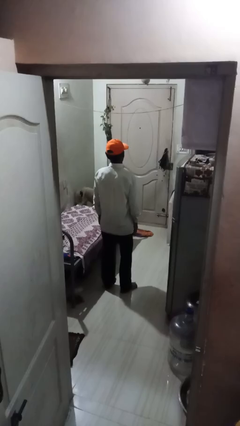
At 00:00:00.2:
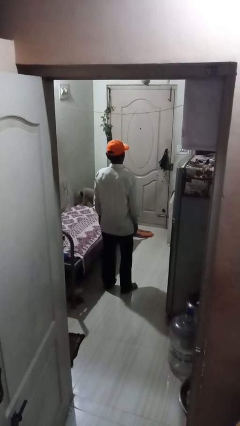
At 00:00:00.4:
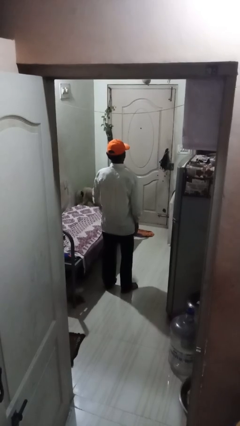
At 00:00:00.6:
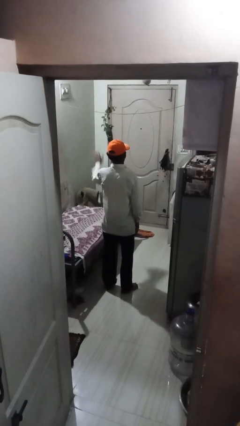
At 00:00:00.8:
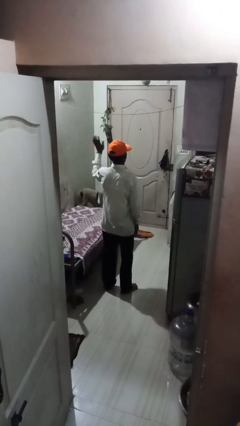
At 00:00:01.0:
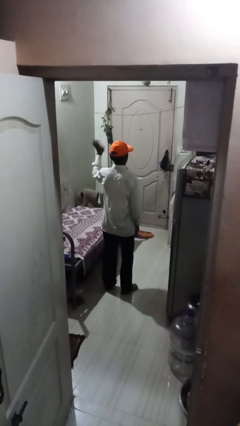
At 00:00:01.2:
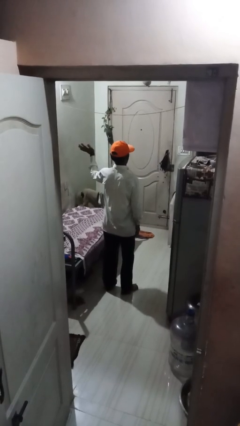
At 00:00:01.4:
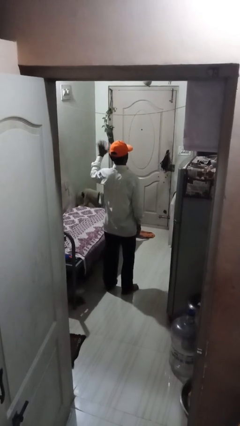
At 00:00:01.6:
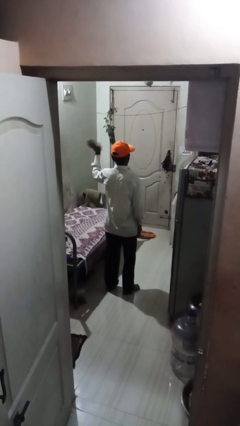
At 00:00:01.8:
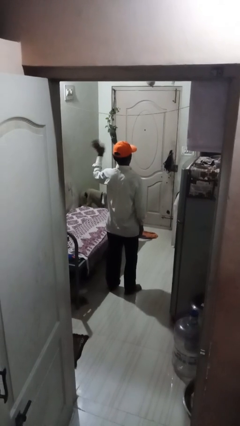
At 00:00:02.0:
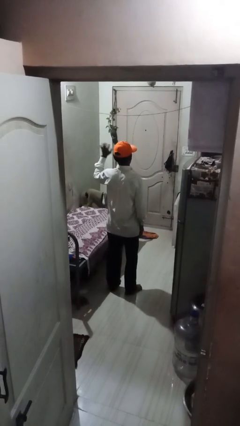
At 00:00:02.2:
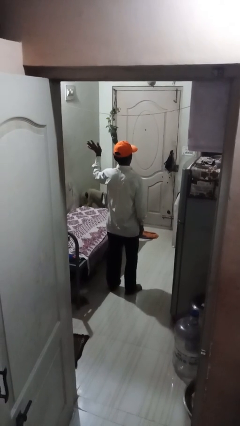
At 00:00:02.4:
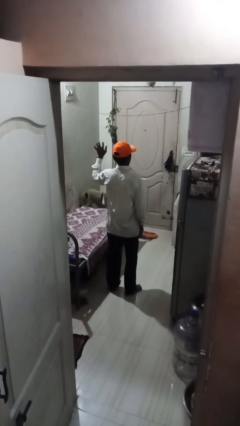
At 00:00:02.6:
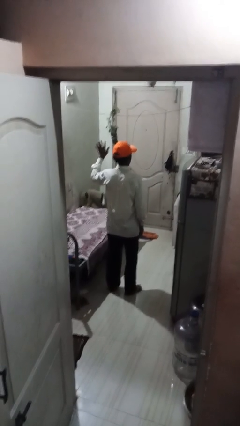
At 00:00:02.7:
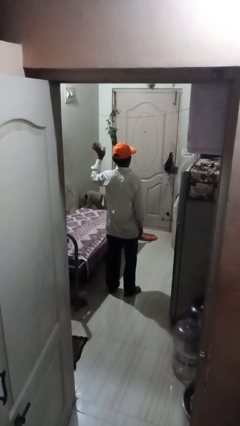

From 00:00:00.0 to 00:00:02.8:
person waves at person

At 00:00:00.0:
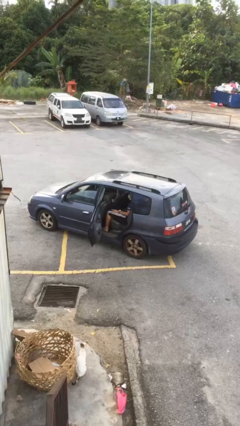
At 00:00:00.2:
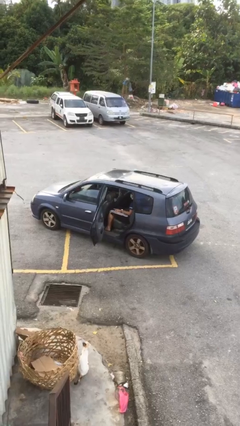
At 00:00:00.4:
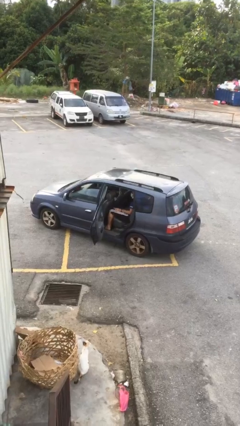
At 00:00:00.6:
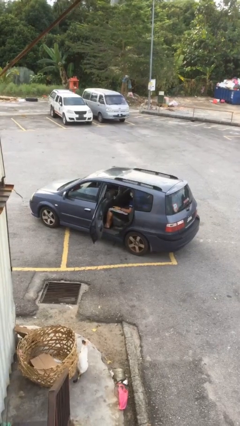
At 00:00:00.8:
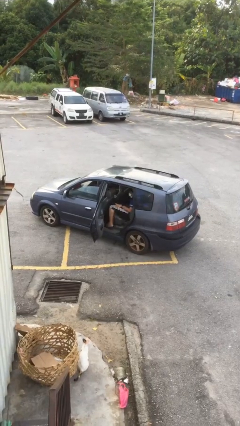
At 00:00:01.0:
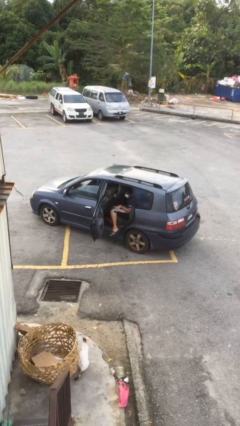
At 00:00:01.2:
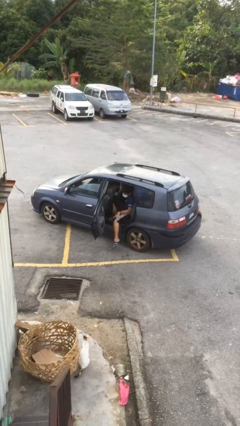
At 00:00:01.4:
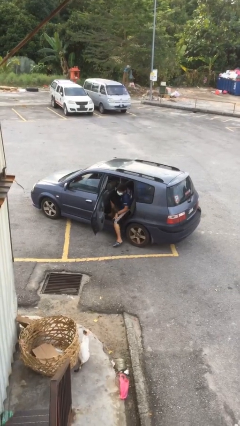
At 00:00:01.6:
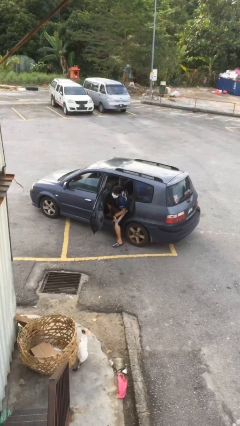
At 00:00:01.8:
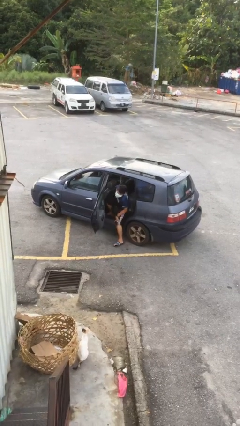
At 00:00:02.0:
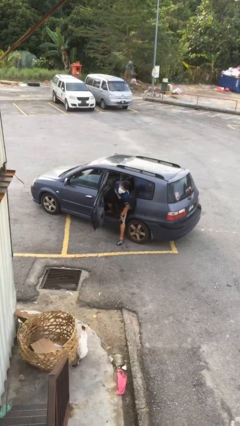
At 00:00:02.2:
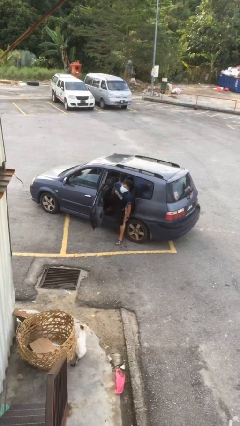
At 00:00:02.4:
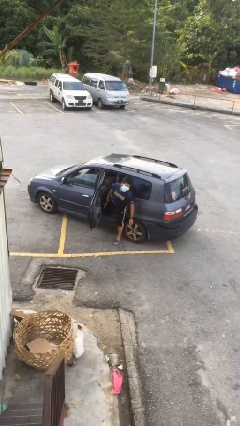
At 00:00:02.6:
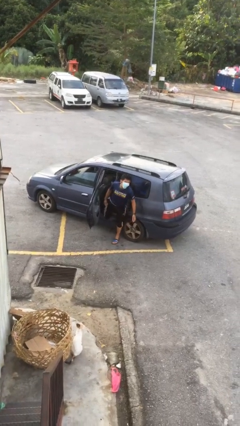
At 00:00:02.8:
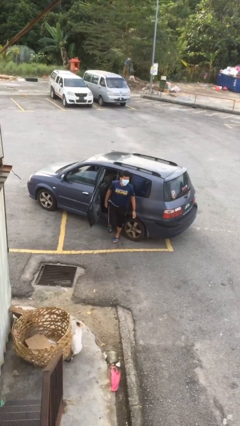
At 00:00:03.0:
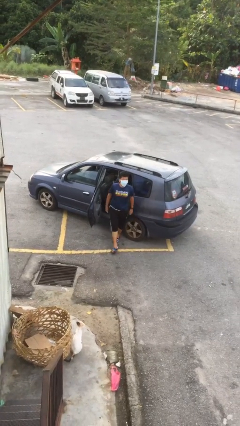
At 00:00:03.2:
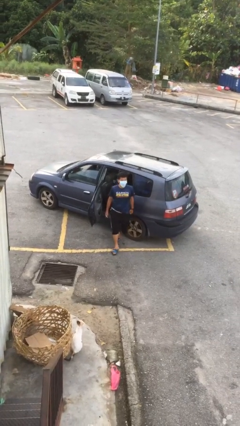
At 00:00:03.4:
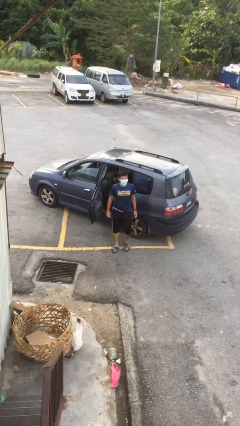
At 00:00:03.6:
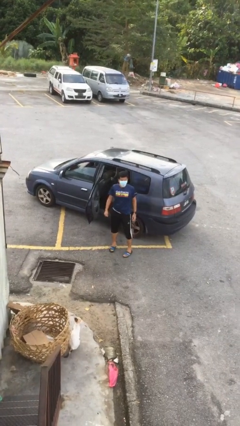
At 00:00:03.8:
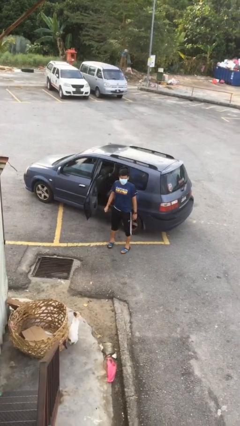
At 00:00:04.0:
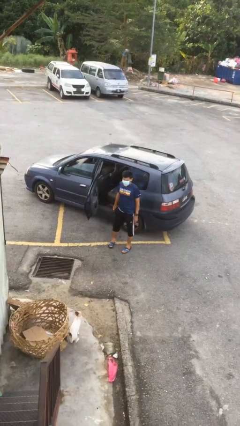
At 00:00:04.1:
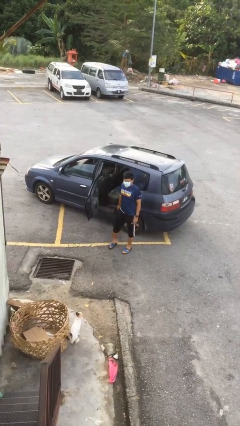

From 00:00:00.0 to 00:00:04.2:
person exits car

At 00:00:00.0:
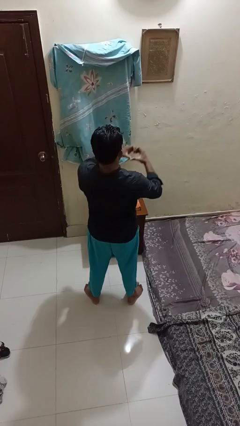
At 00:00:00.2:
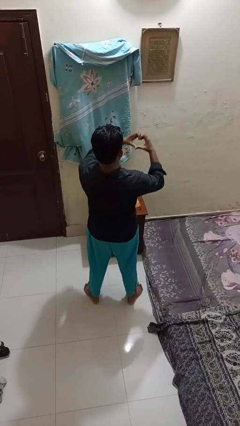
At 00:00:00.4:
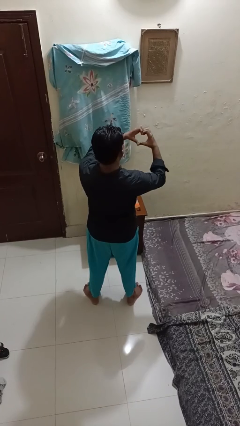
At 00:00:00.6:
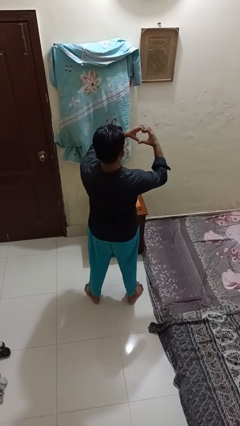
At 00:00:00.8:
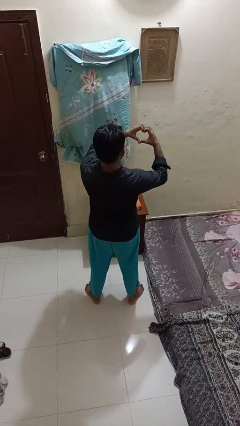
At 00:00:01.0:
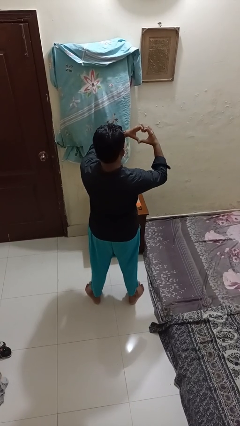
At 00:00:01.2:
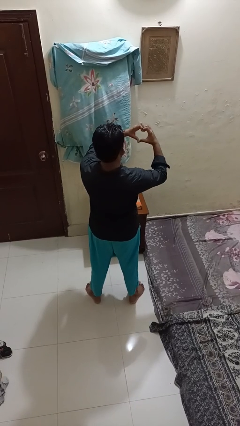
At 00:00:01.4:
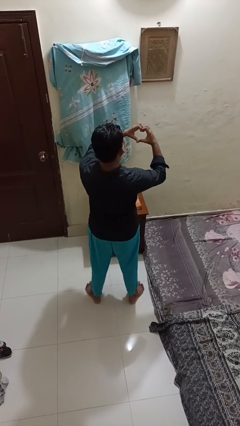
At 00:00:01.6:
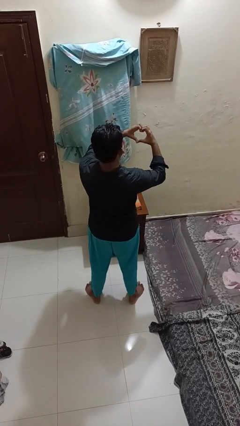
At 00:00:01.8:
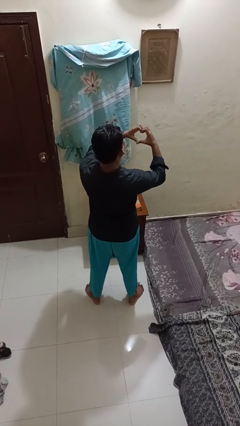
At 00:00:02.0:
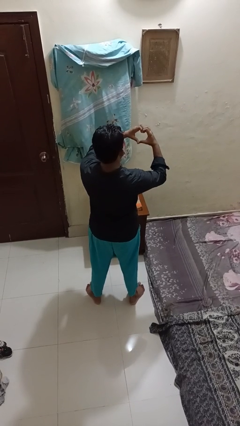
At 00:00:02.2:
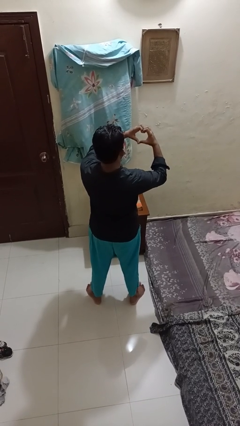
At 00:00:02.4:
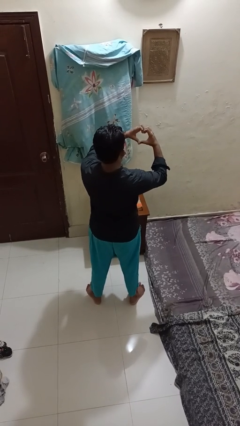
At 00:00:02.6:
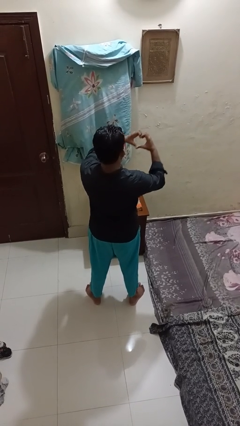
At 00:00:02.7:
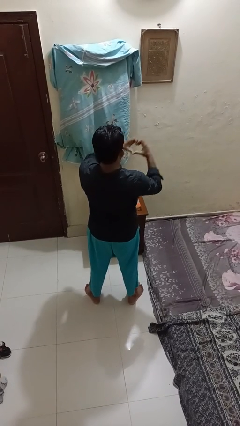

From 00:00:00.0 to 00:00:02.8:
person gestures heart

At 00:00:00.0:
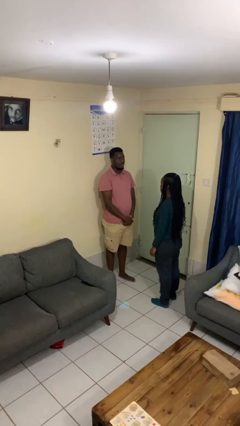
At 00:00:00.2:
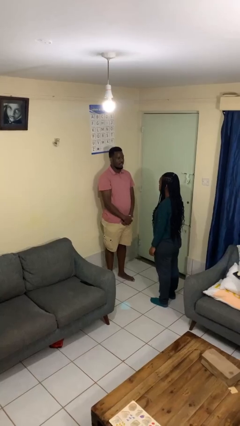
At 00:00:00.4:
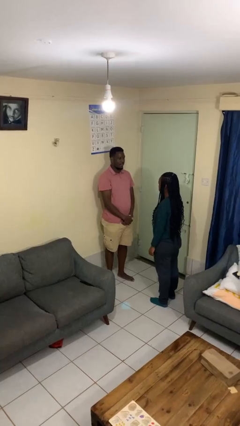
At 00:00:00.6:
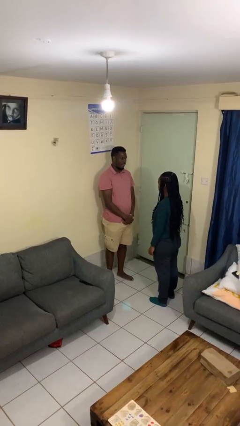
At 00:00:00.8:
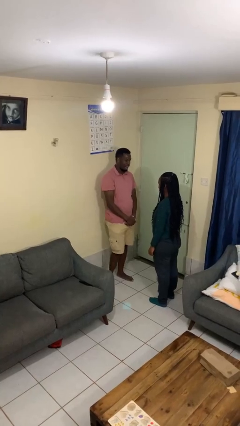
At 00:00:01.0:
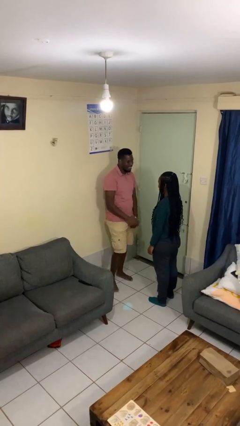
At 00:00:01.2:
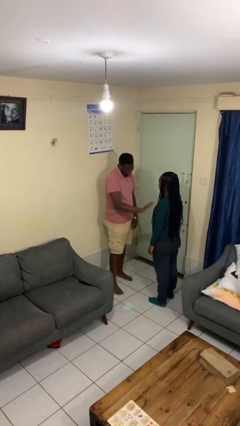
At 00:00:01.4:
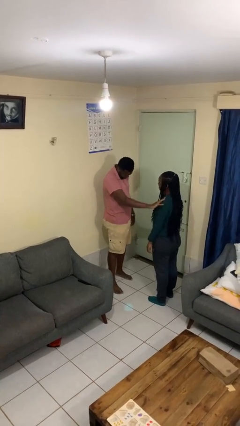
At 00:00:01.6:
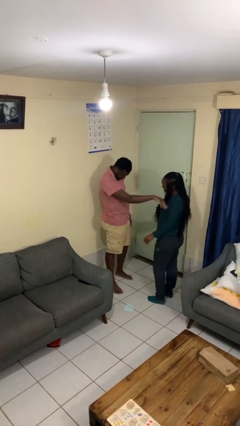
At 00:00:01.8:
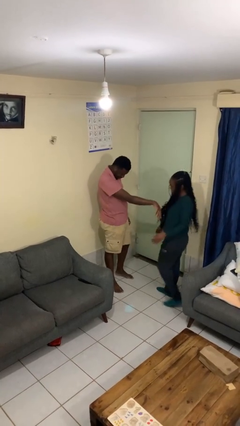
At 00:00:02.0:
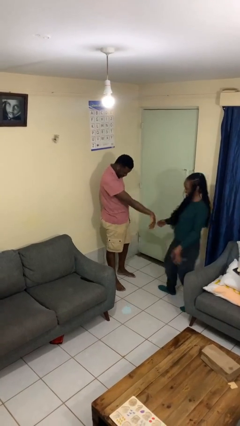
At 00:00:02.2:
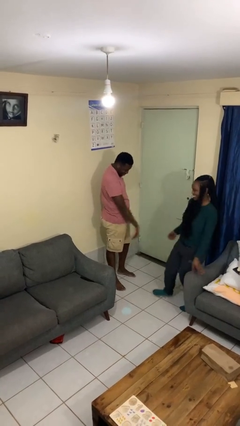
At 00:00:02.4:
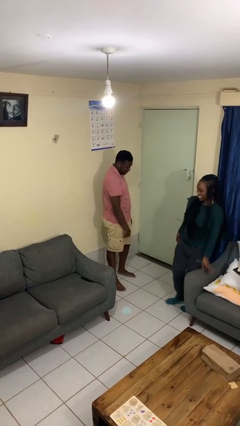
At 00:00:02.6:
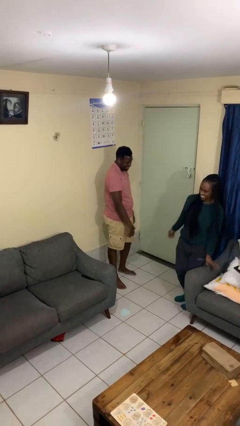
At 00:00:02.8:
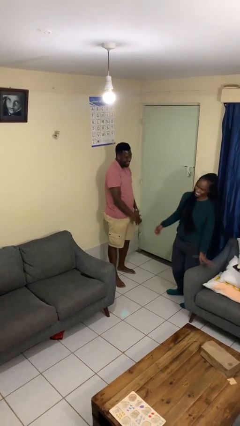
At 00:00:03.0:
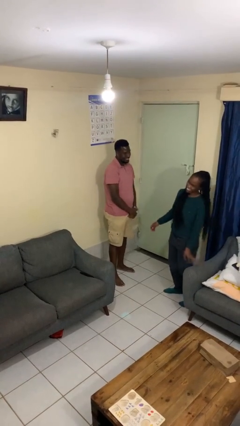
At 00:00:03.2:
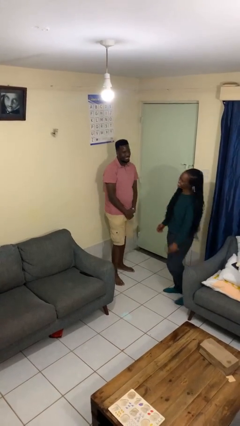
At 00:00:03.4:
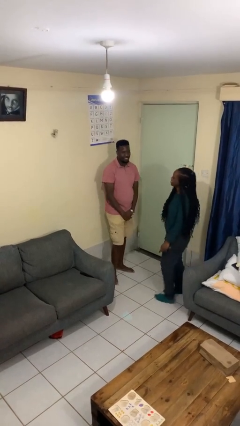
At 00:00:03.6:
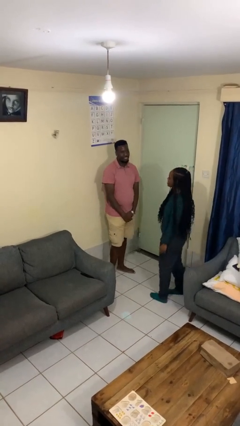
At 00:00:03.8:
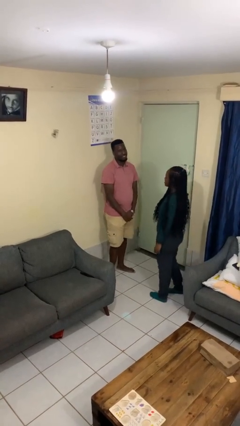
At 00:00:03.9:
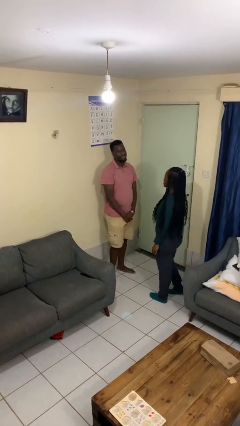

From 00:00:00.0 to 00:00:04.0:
person shoves person

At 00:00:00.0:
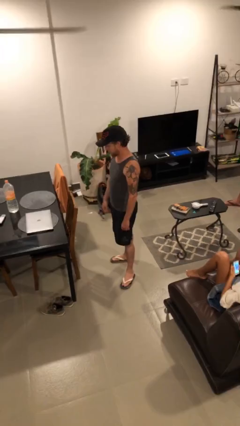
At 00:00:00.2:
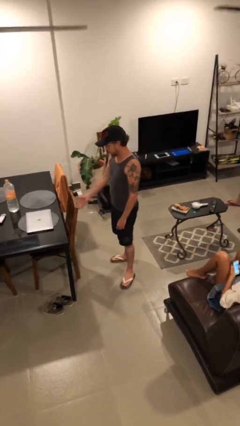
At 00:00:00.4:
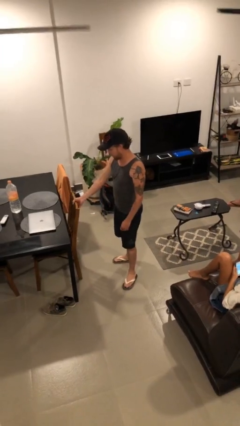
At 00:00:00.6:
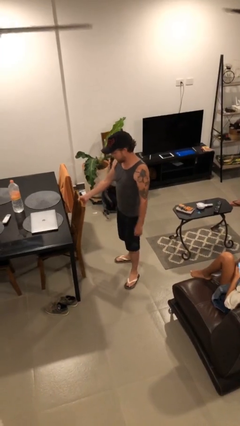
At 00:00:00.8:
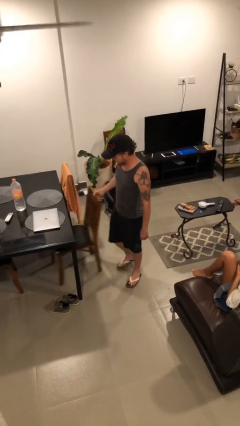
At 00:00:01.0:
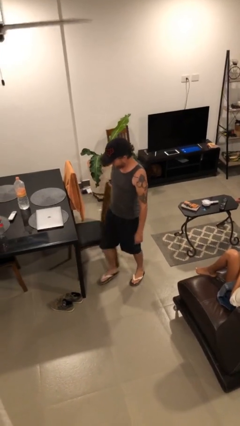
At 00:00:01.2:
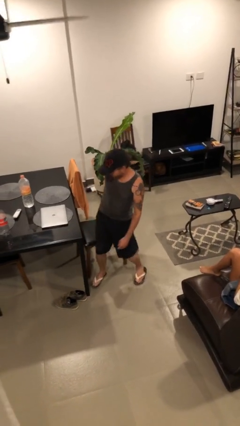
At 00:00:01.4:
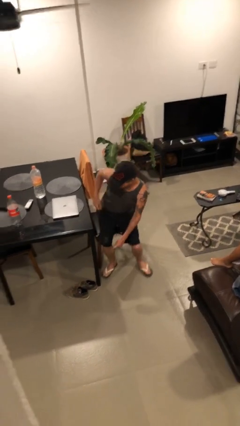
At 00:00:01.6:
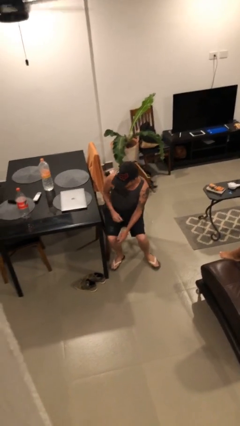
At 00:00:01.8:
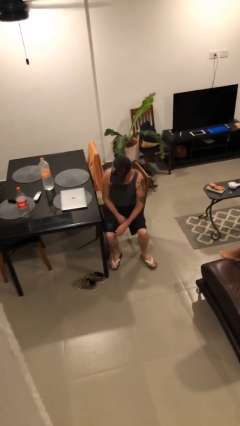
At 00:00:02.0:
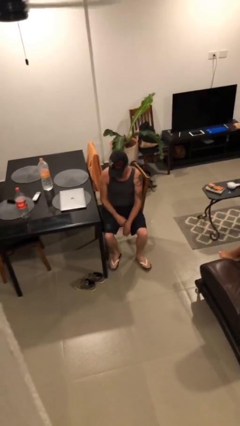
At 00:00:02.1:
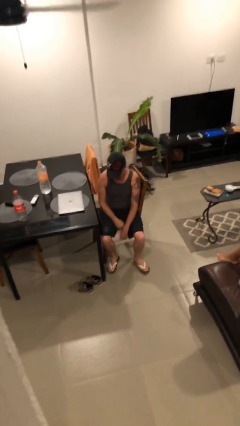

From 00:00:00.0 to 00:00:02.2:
person sits down

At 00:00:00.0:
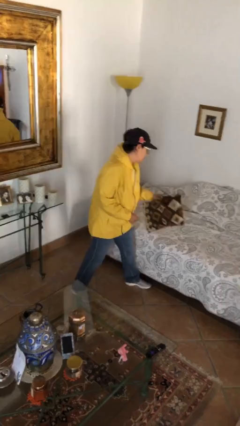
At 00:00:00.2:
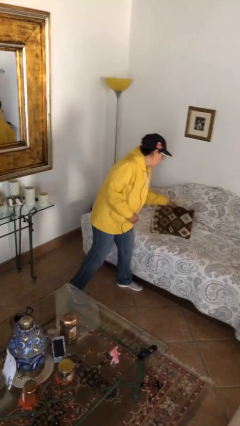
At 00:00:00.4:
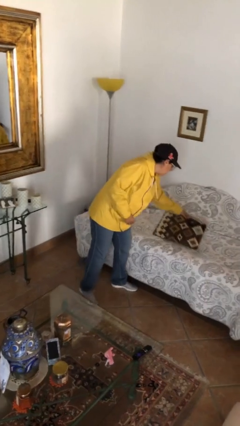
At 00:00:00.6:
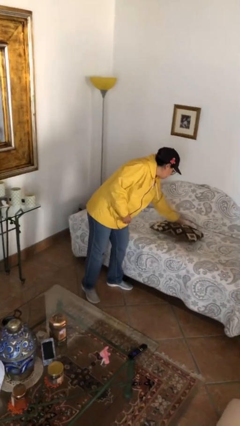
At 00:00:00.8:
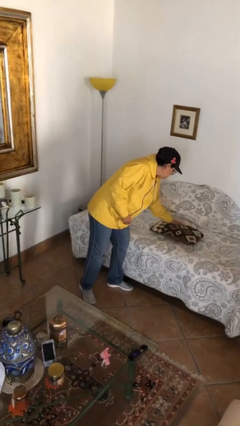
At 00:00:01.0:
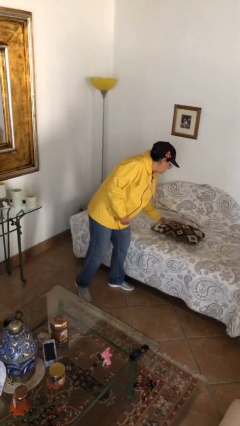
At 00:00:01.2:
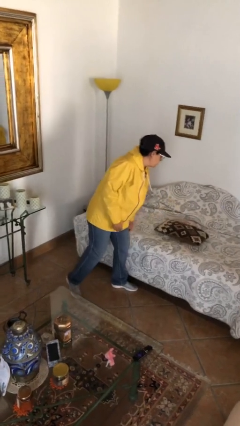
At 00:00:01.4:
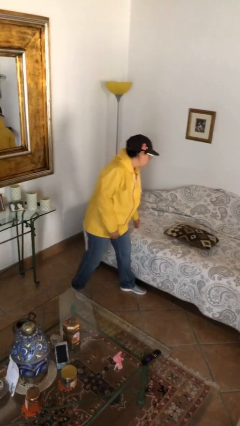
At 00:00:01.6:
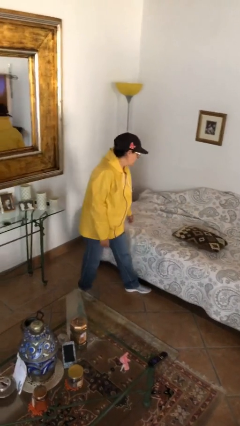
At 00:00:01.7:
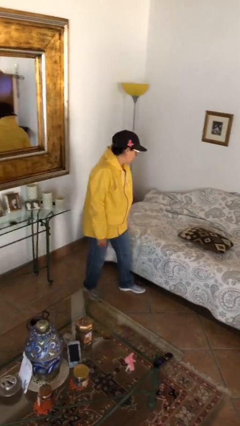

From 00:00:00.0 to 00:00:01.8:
person puts down object on bed
